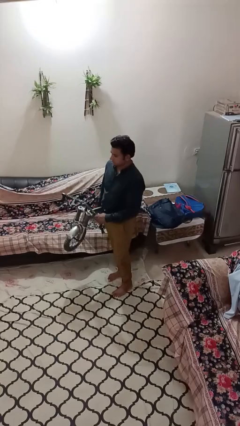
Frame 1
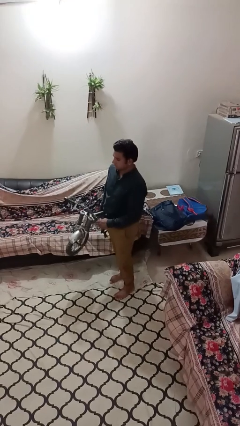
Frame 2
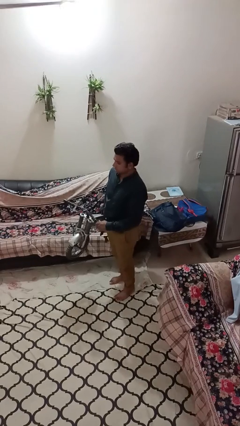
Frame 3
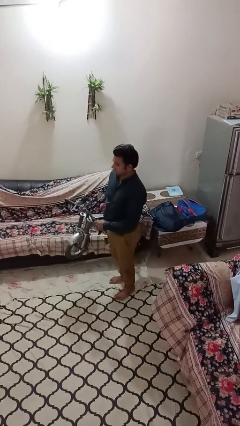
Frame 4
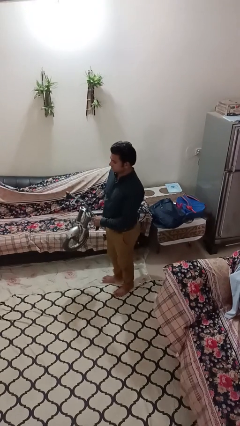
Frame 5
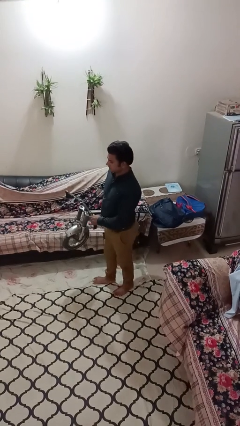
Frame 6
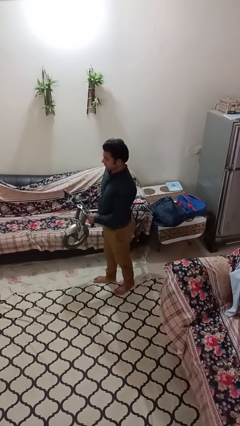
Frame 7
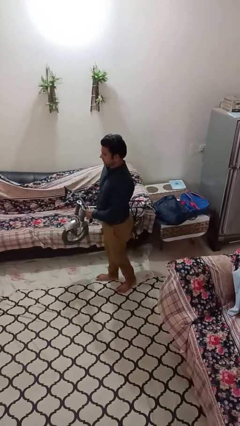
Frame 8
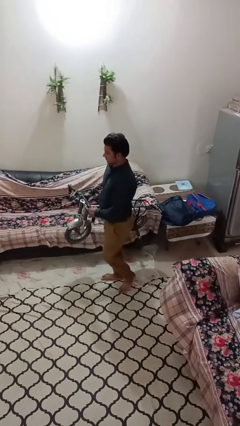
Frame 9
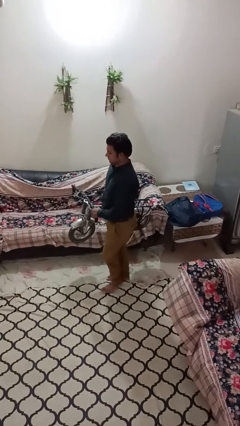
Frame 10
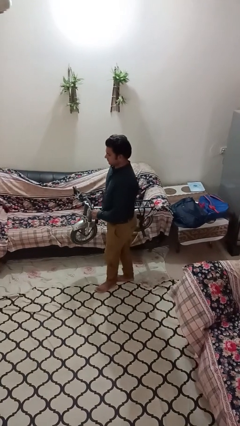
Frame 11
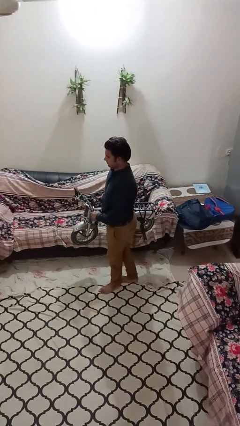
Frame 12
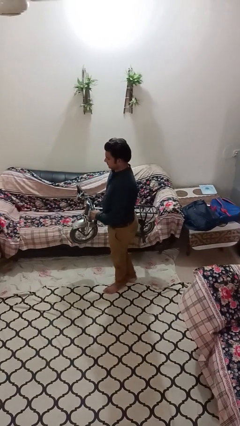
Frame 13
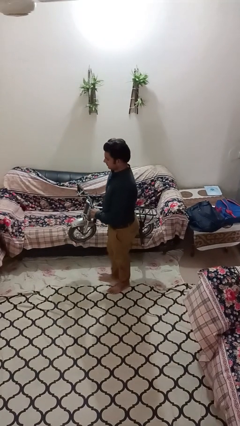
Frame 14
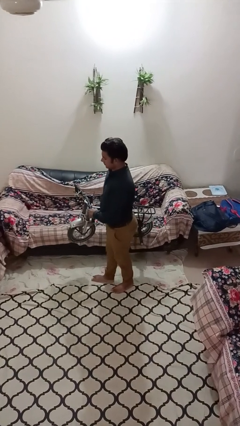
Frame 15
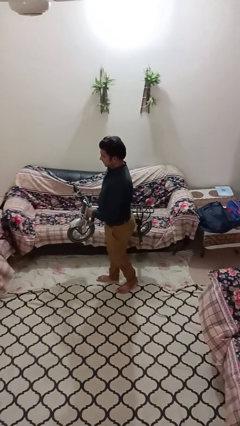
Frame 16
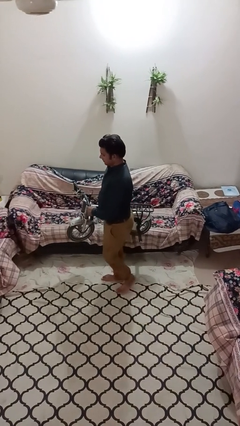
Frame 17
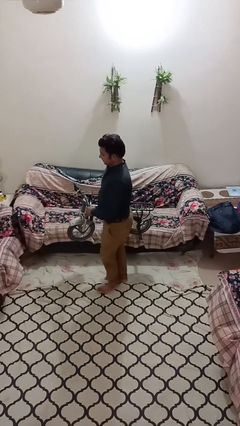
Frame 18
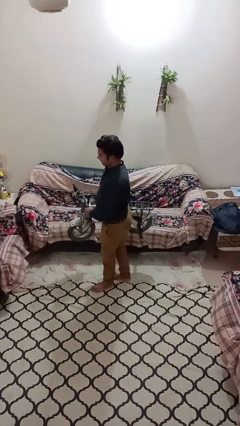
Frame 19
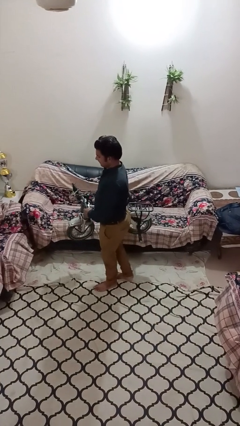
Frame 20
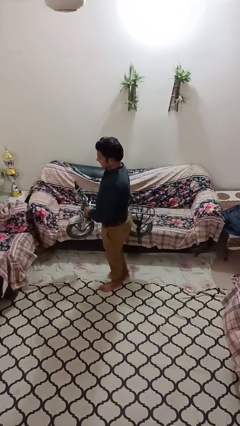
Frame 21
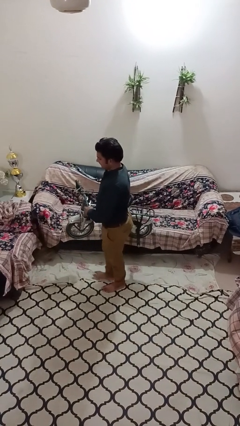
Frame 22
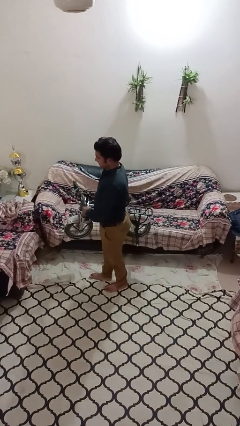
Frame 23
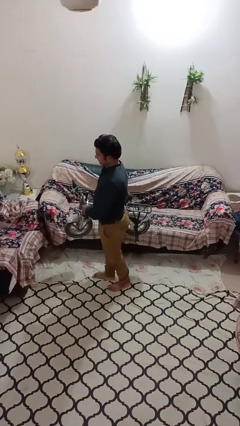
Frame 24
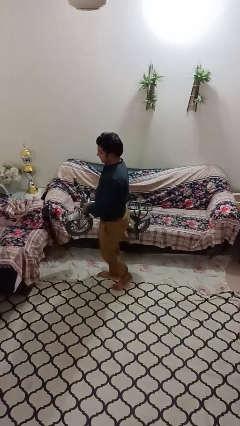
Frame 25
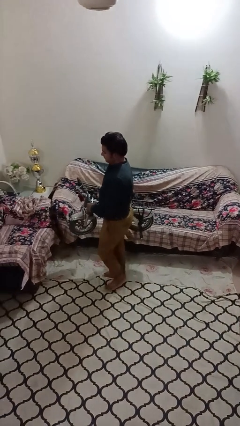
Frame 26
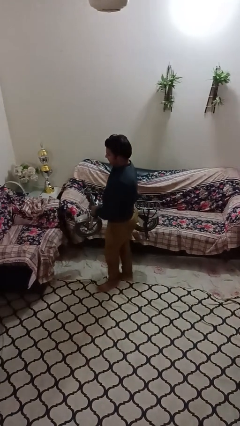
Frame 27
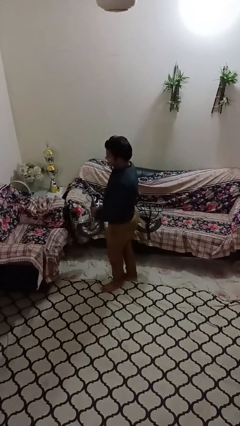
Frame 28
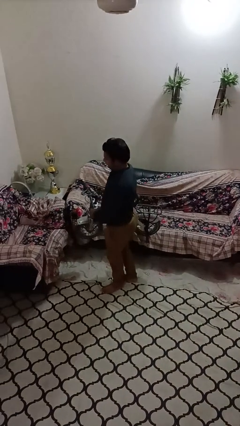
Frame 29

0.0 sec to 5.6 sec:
person carries bicycle

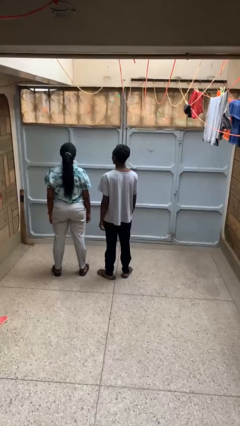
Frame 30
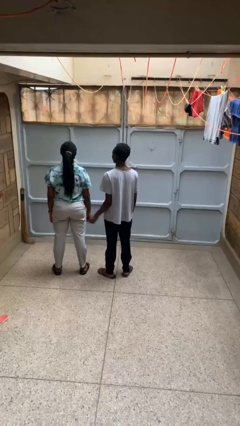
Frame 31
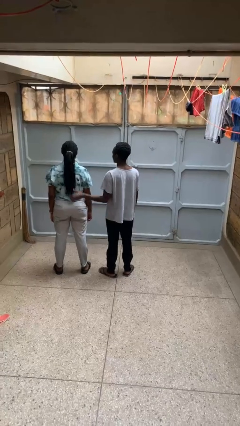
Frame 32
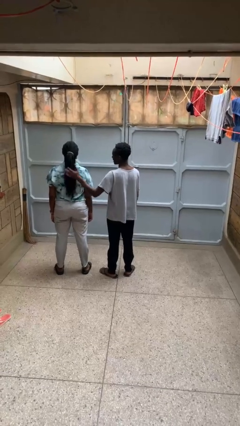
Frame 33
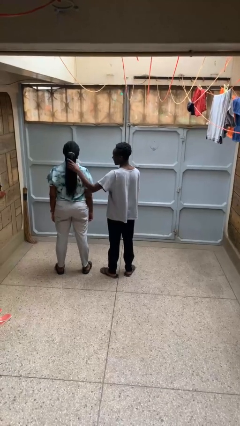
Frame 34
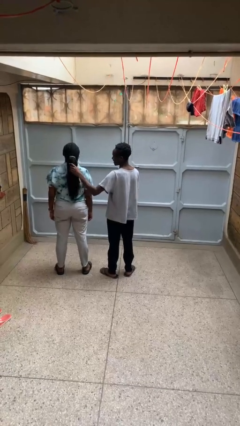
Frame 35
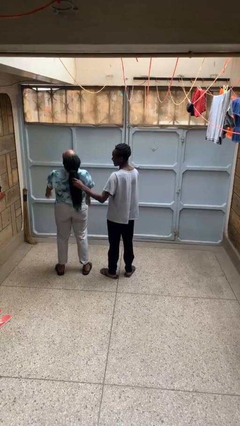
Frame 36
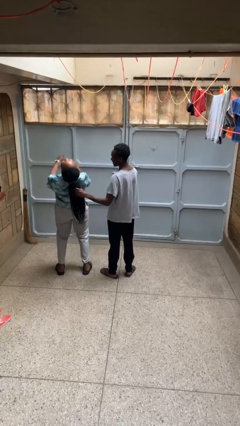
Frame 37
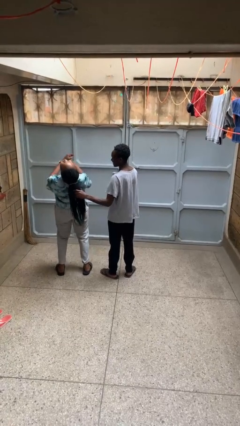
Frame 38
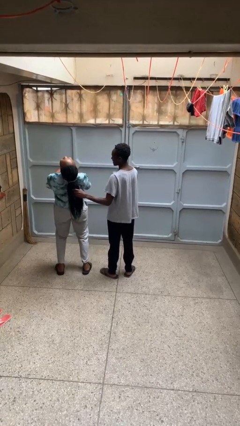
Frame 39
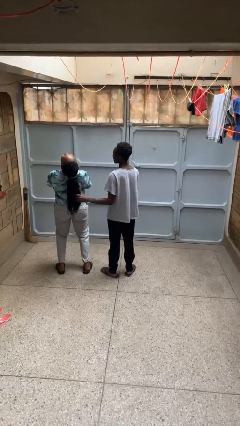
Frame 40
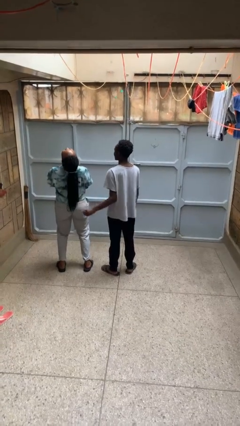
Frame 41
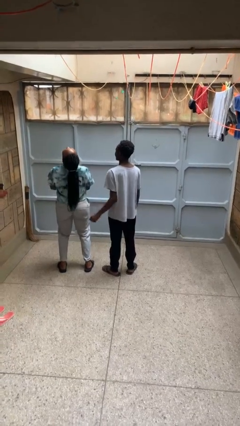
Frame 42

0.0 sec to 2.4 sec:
person grabs person by hair

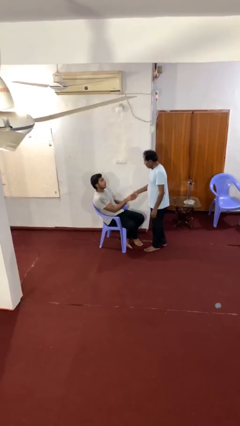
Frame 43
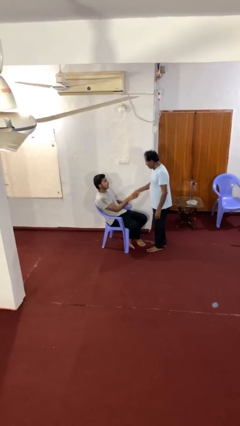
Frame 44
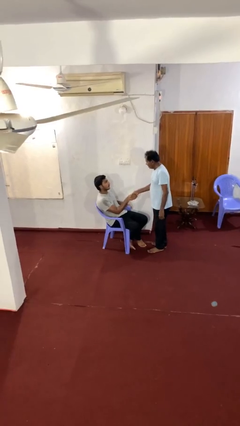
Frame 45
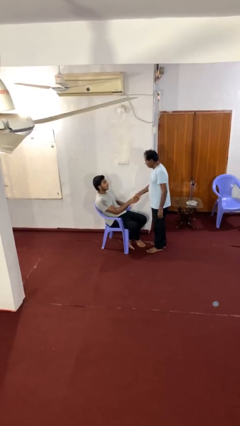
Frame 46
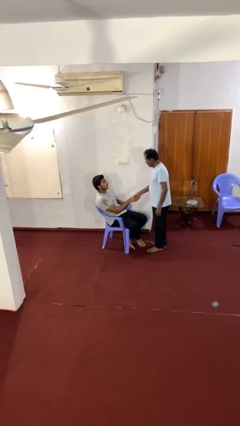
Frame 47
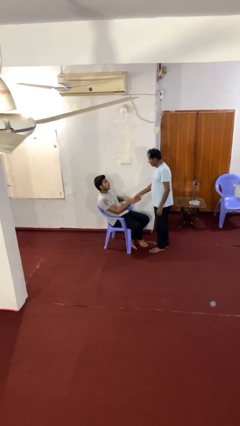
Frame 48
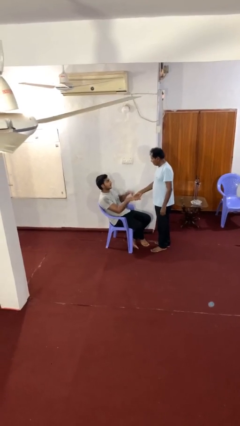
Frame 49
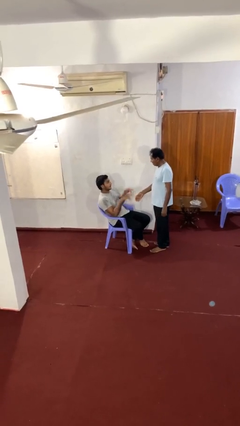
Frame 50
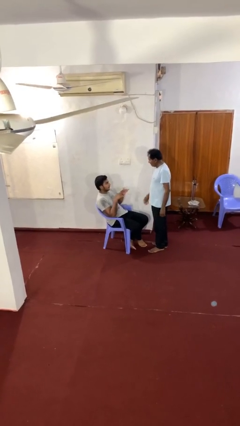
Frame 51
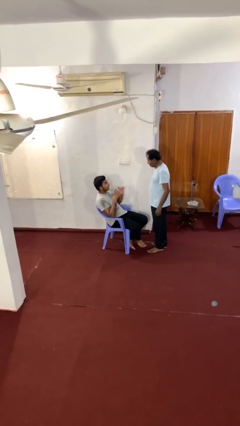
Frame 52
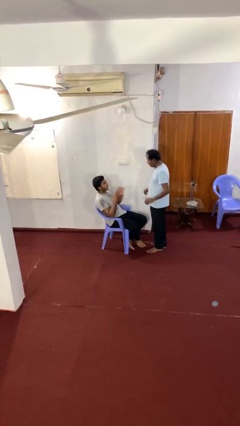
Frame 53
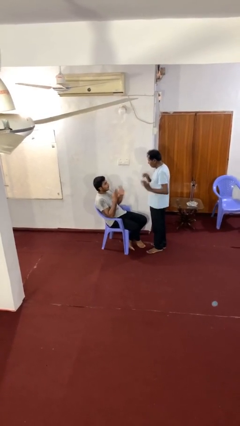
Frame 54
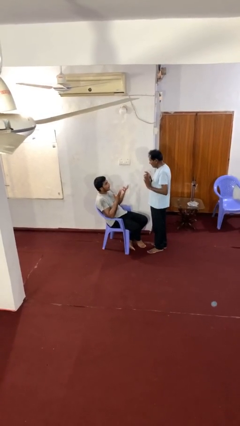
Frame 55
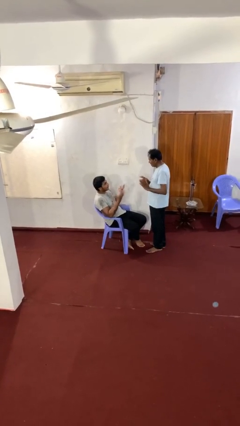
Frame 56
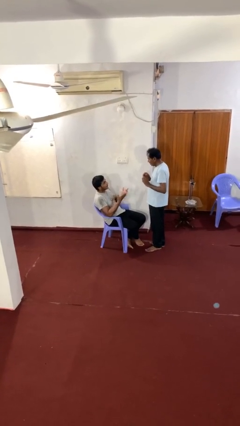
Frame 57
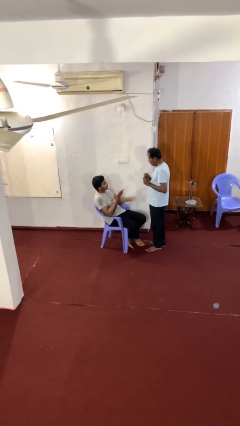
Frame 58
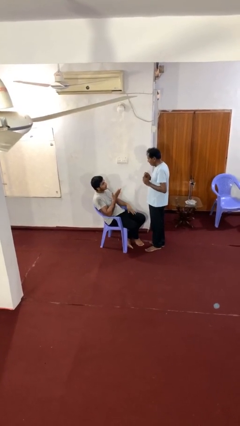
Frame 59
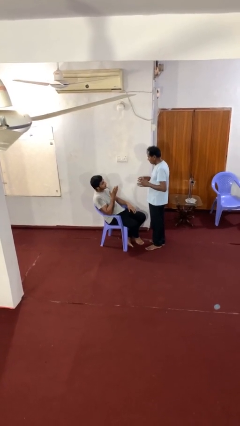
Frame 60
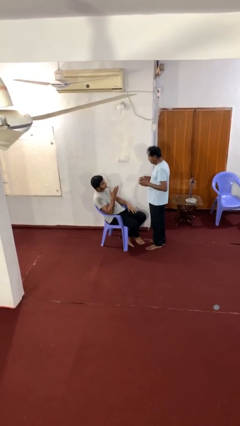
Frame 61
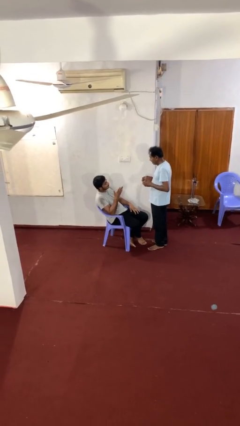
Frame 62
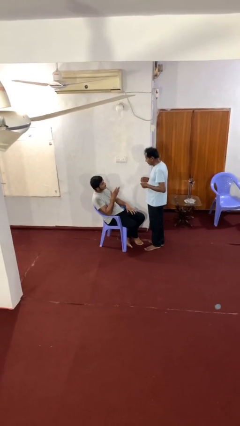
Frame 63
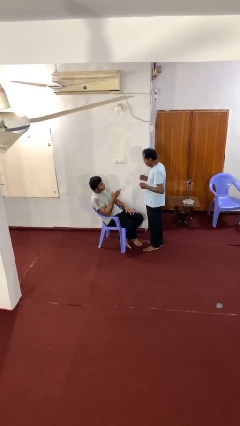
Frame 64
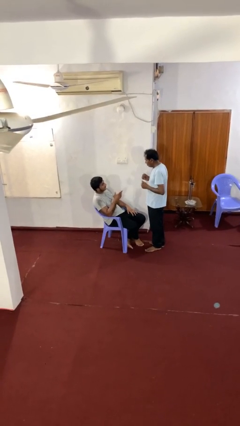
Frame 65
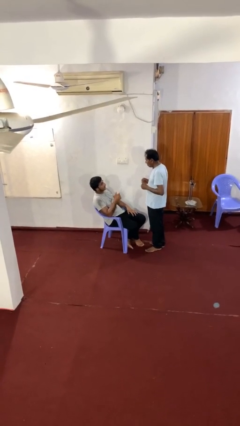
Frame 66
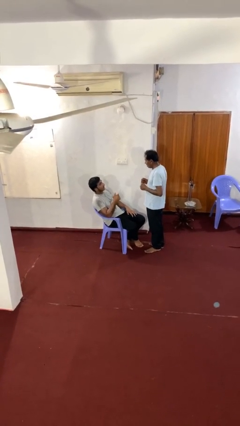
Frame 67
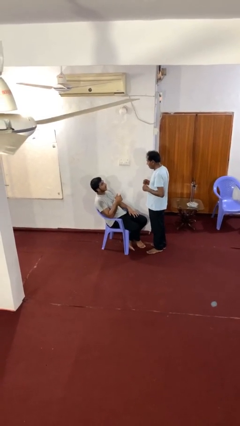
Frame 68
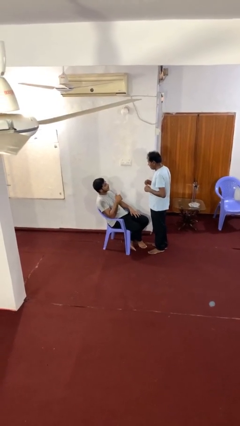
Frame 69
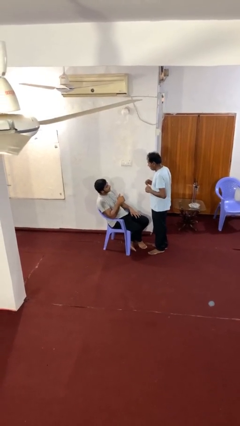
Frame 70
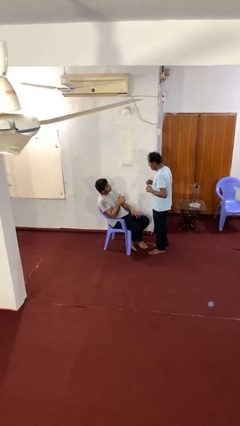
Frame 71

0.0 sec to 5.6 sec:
person shakes hand

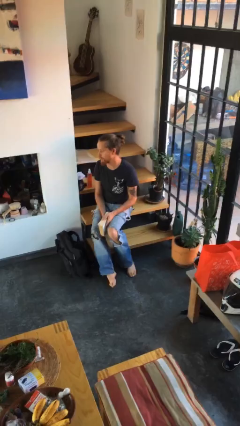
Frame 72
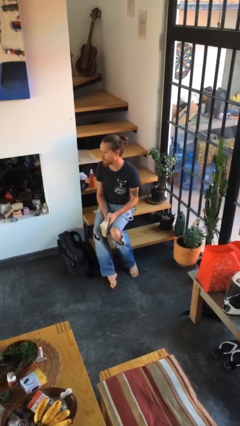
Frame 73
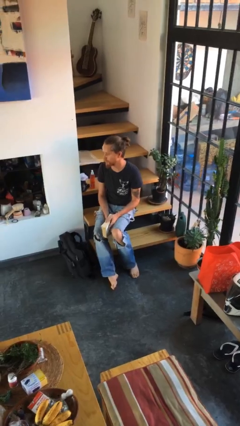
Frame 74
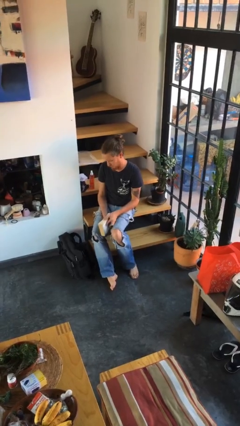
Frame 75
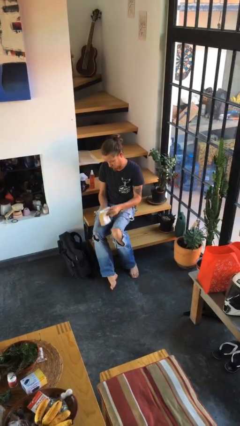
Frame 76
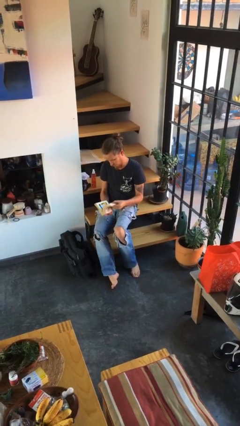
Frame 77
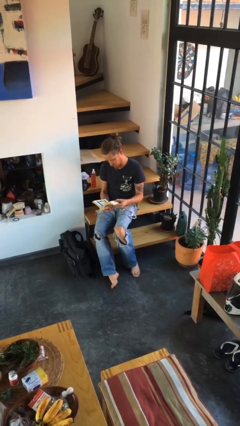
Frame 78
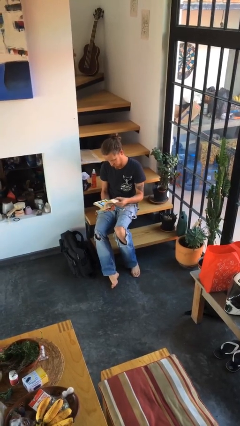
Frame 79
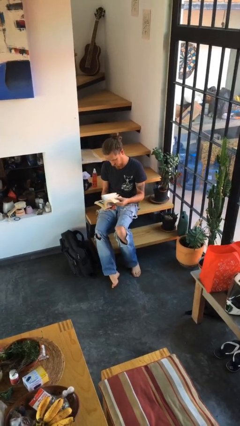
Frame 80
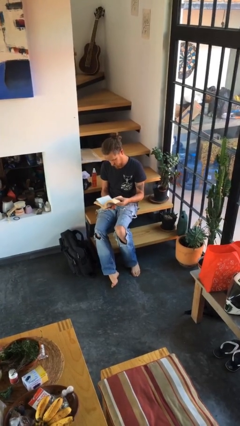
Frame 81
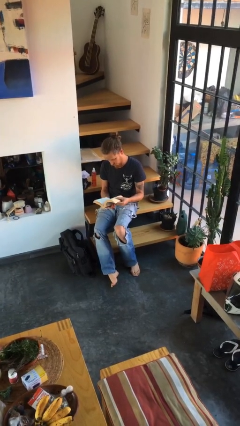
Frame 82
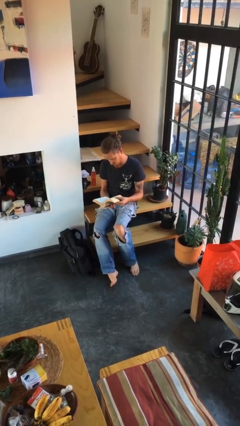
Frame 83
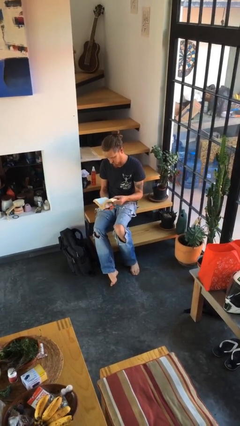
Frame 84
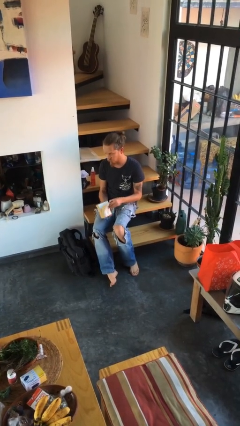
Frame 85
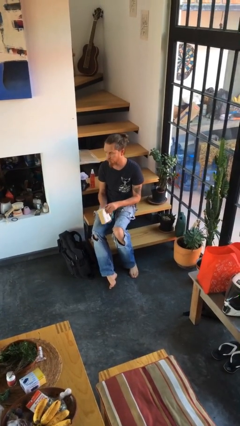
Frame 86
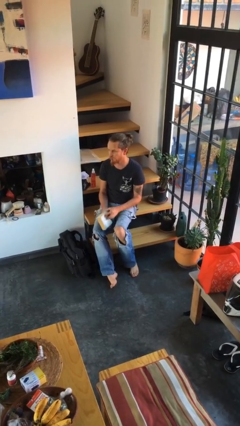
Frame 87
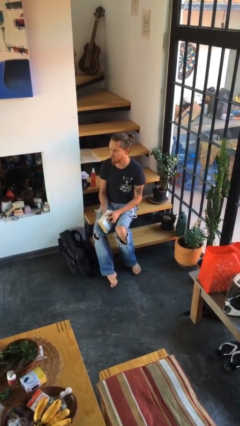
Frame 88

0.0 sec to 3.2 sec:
person reads book

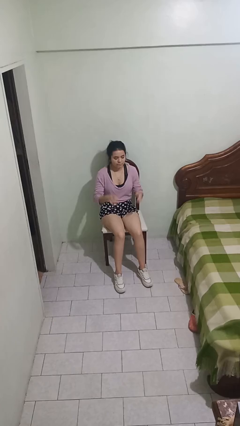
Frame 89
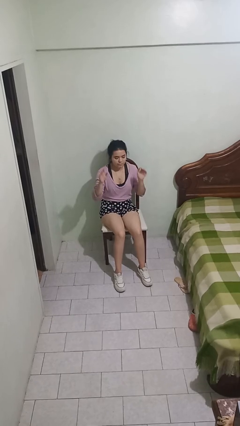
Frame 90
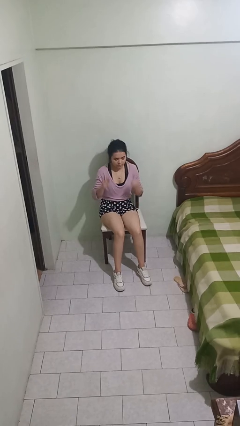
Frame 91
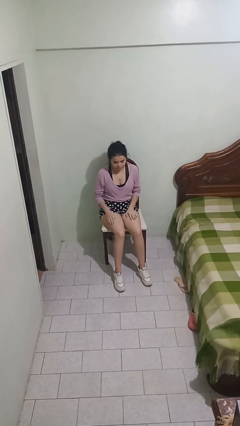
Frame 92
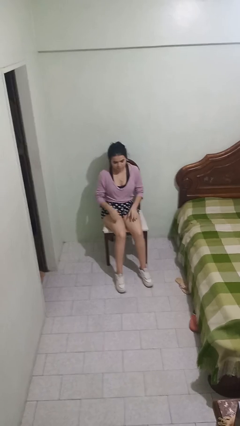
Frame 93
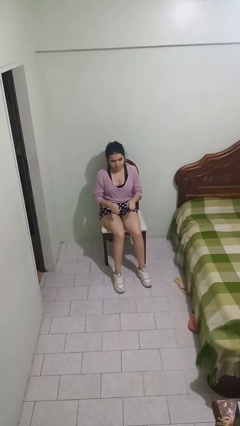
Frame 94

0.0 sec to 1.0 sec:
person slaps hands on thighs
